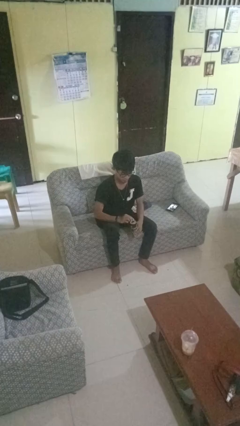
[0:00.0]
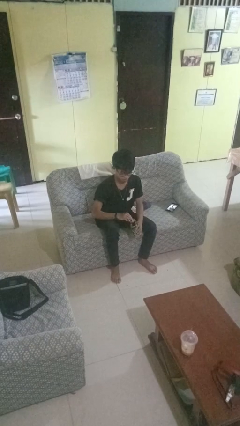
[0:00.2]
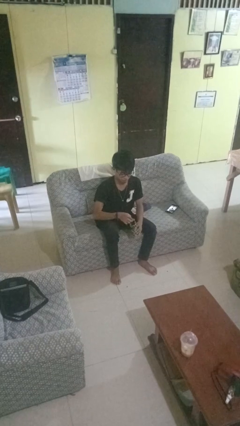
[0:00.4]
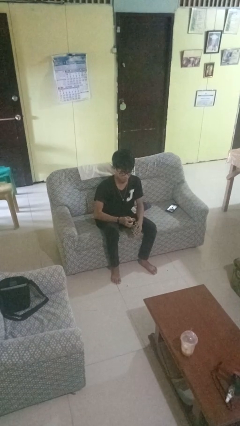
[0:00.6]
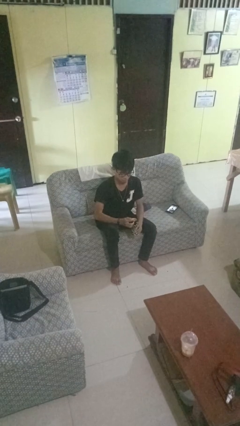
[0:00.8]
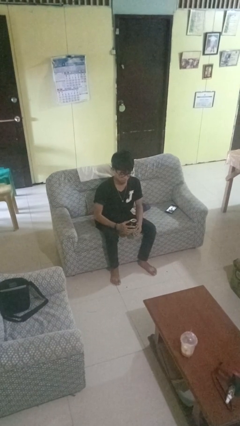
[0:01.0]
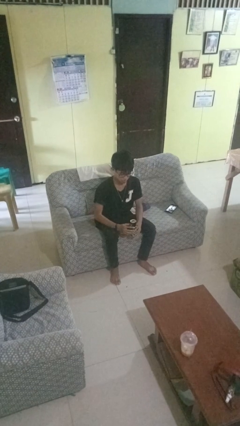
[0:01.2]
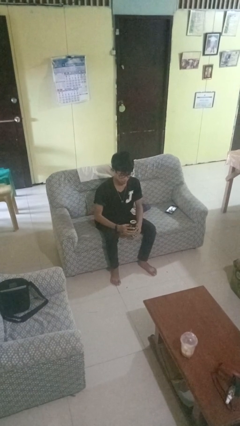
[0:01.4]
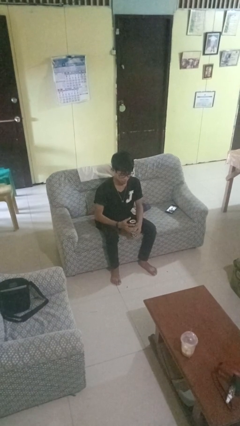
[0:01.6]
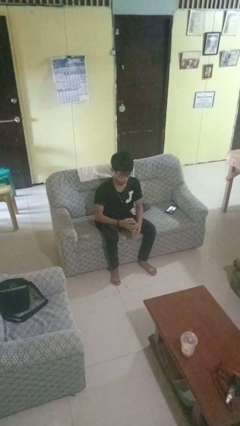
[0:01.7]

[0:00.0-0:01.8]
person opens beverage can

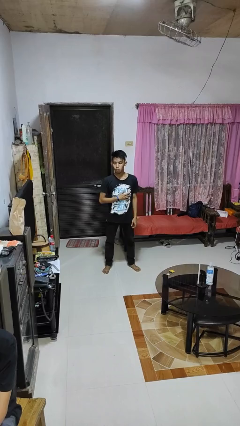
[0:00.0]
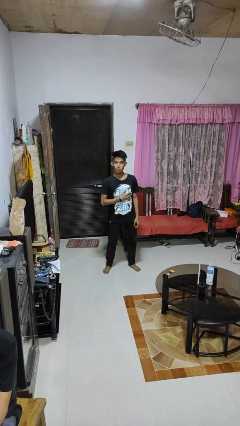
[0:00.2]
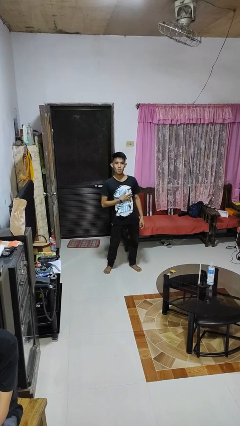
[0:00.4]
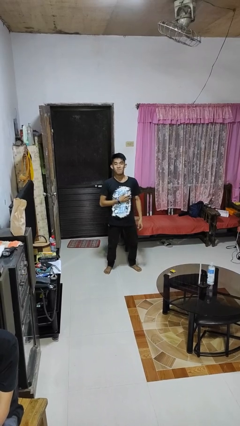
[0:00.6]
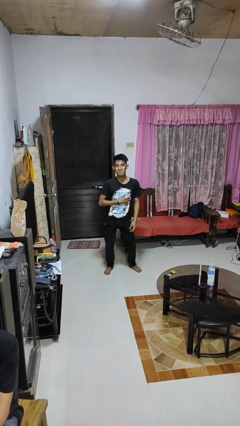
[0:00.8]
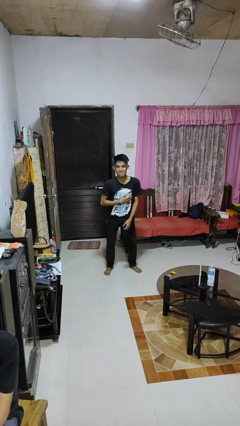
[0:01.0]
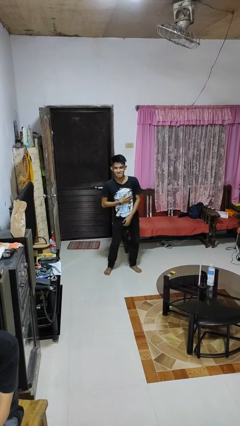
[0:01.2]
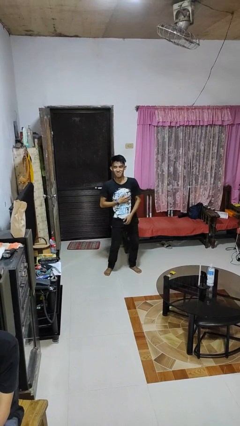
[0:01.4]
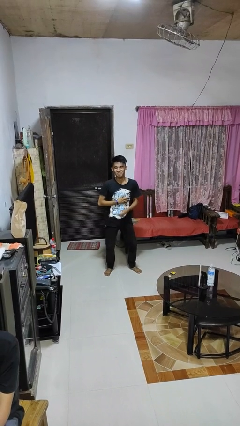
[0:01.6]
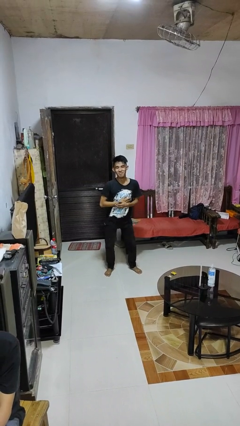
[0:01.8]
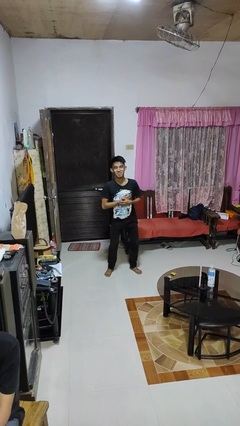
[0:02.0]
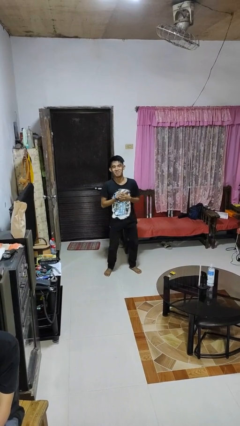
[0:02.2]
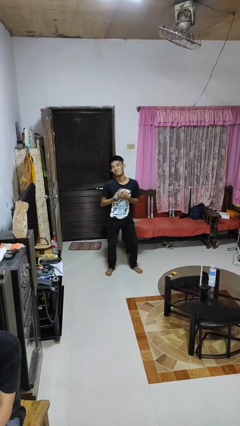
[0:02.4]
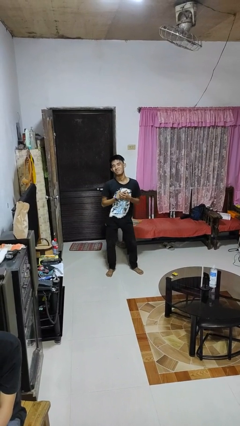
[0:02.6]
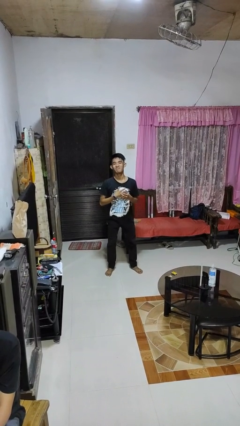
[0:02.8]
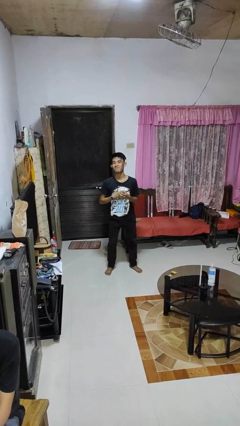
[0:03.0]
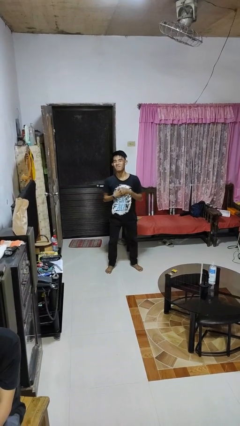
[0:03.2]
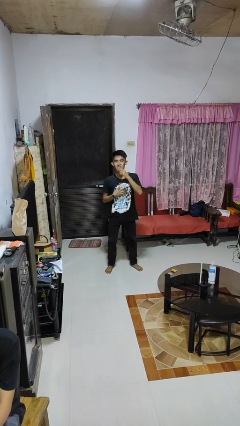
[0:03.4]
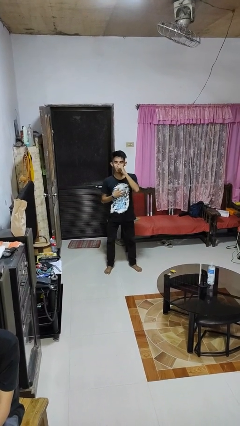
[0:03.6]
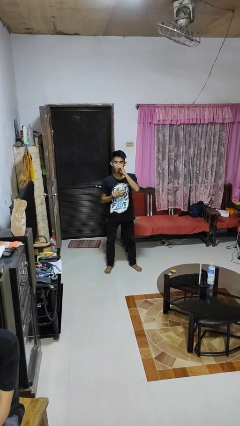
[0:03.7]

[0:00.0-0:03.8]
person wiggles hips

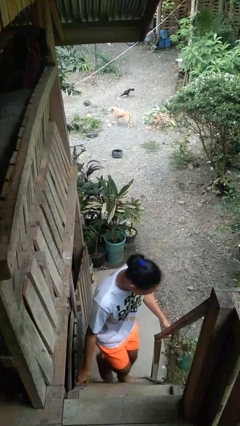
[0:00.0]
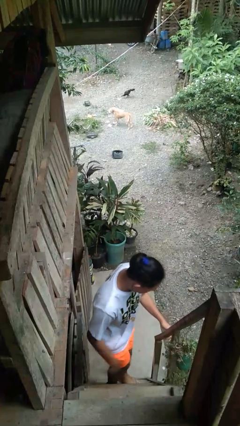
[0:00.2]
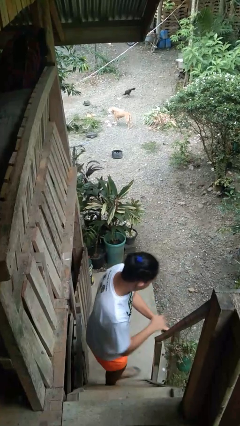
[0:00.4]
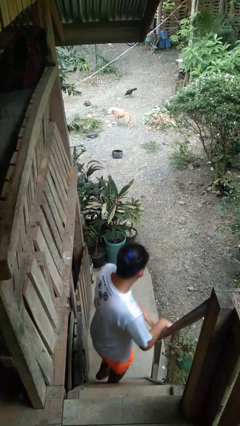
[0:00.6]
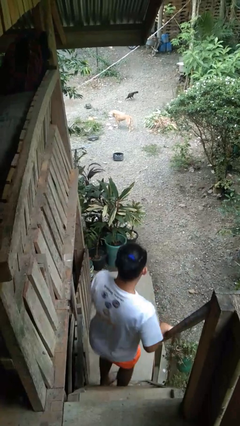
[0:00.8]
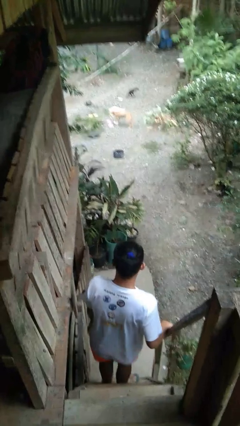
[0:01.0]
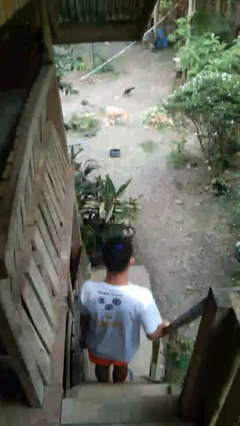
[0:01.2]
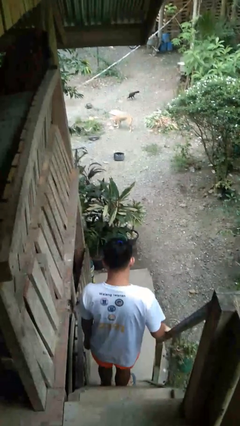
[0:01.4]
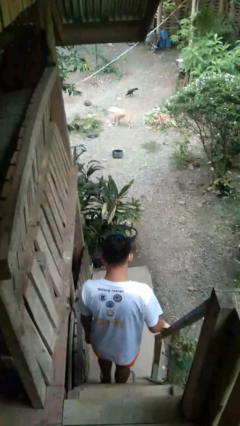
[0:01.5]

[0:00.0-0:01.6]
person climbs down stairs

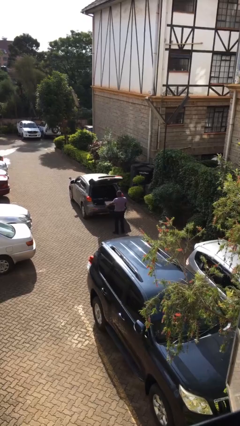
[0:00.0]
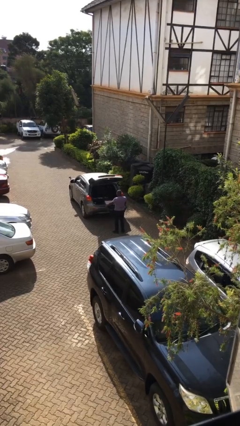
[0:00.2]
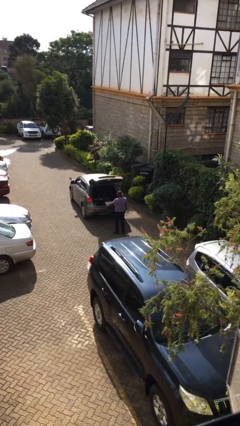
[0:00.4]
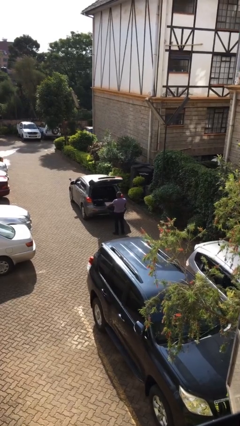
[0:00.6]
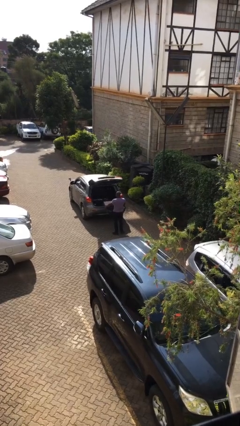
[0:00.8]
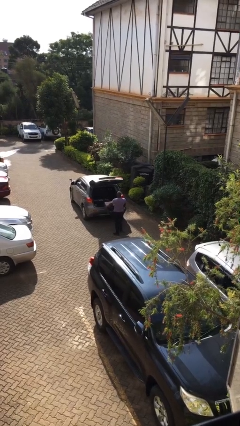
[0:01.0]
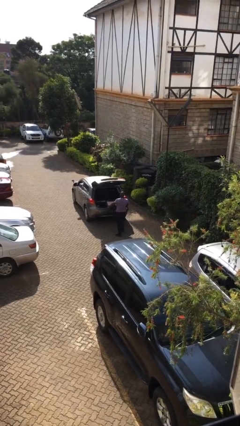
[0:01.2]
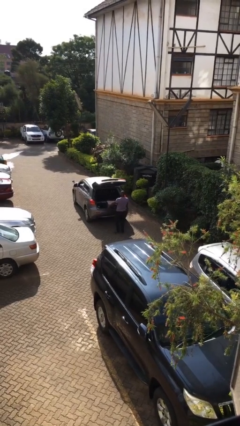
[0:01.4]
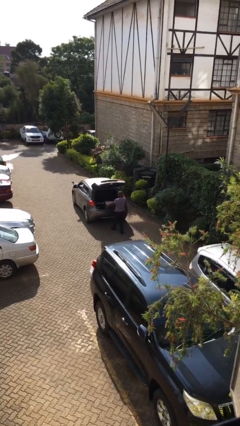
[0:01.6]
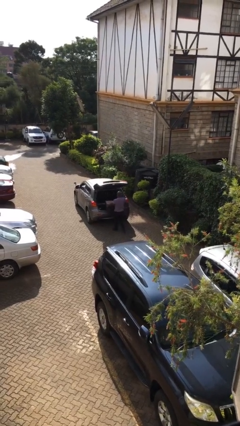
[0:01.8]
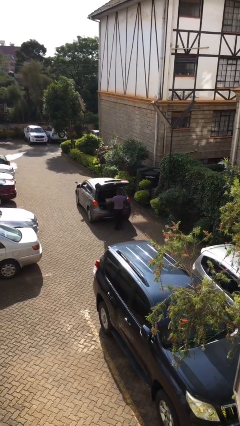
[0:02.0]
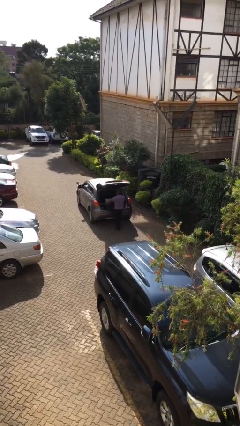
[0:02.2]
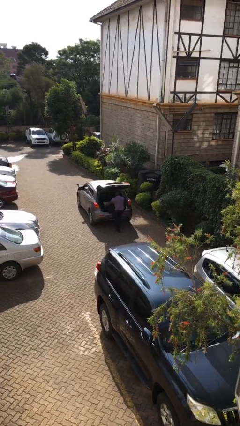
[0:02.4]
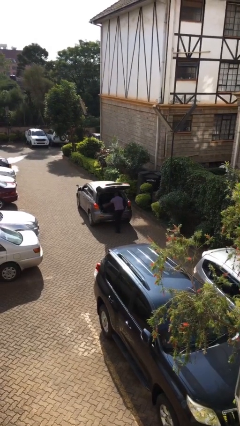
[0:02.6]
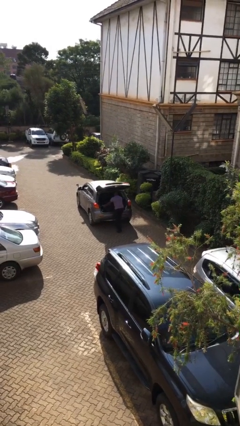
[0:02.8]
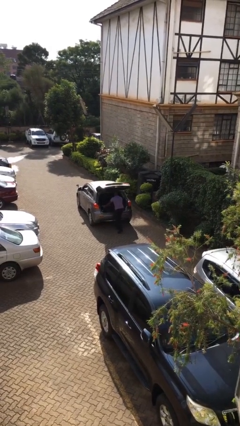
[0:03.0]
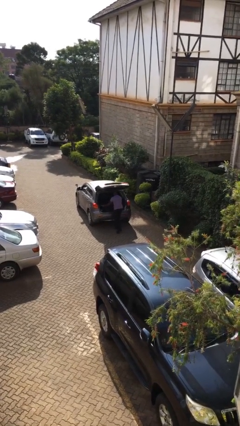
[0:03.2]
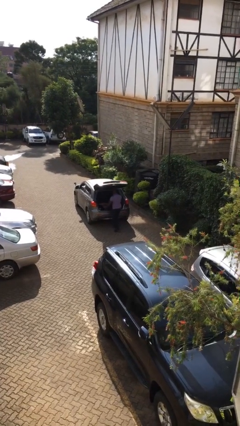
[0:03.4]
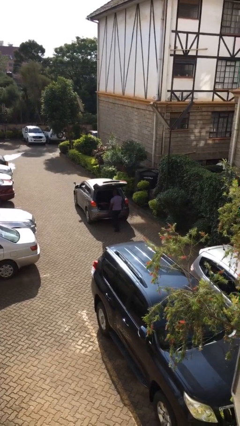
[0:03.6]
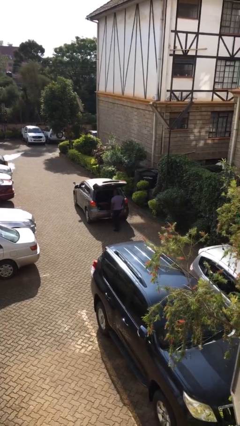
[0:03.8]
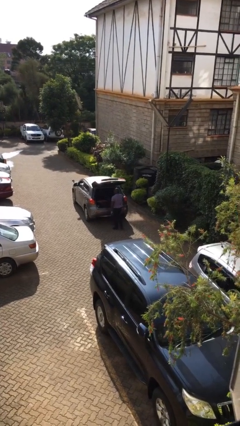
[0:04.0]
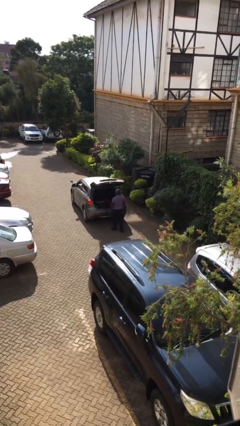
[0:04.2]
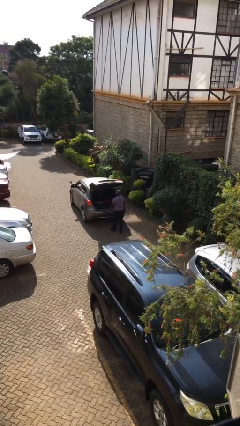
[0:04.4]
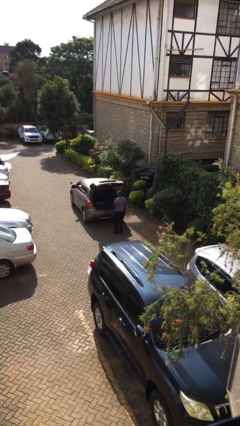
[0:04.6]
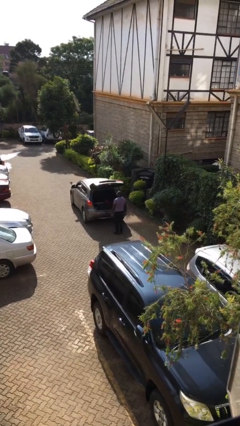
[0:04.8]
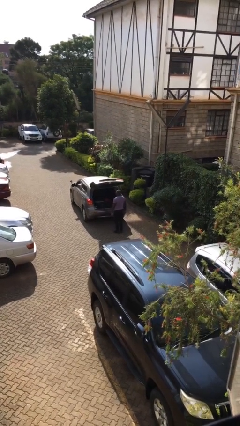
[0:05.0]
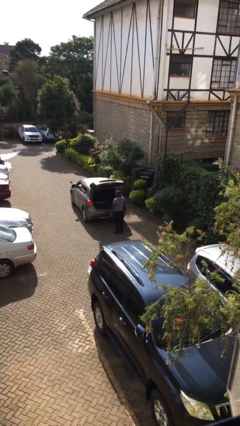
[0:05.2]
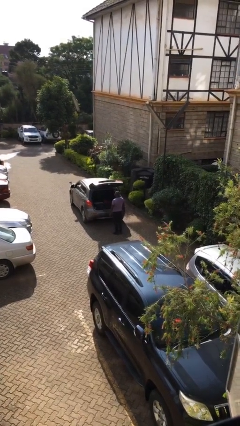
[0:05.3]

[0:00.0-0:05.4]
person loads car

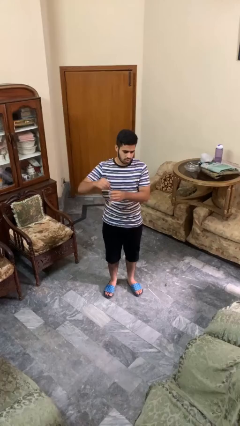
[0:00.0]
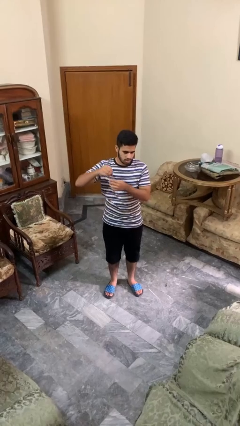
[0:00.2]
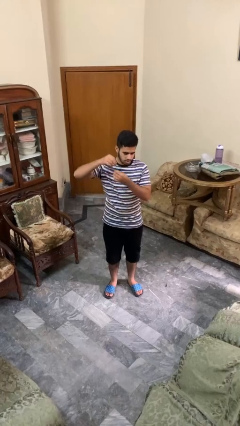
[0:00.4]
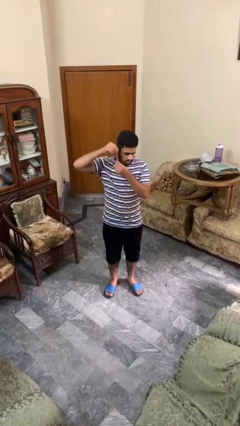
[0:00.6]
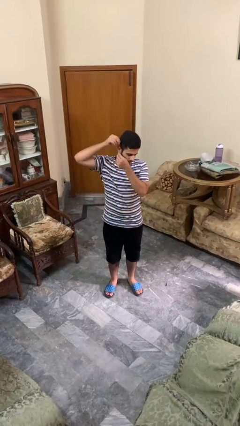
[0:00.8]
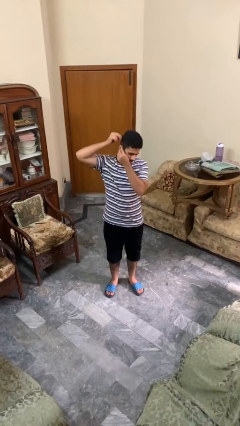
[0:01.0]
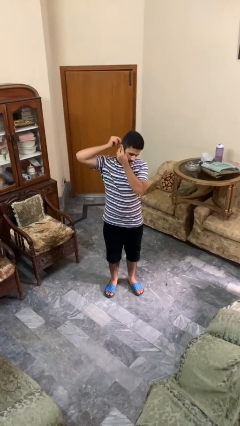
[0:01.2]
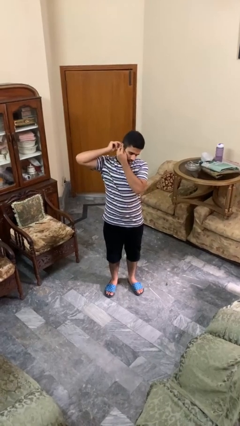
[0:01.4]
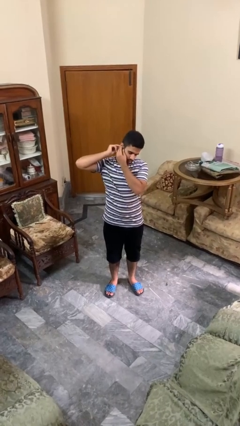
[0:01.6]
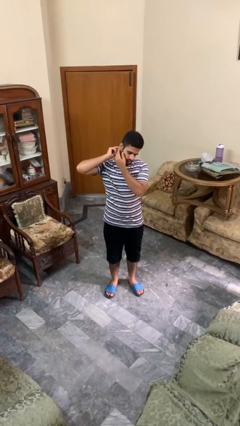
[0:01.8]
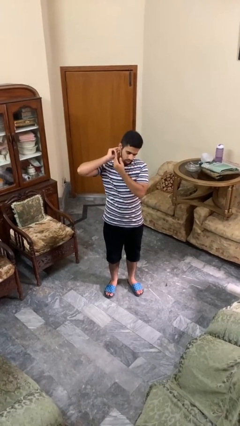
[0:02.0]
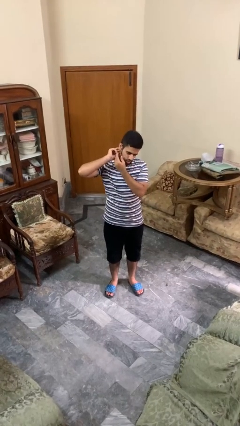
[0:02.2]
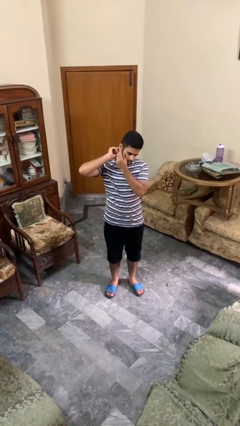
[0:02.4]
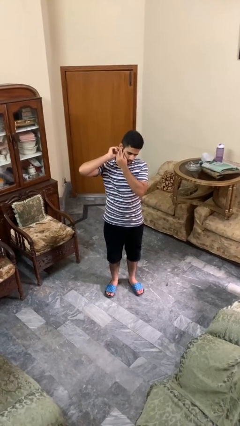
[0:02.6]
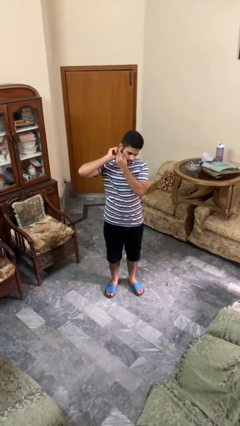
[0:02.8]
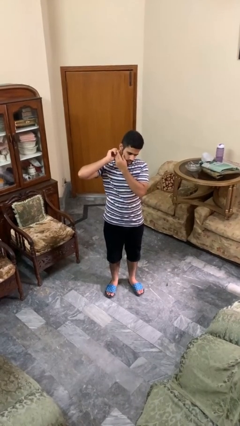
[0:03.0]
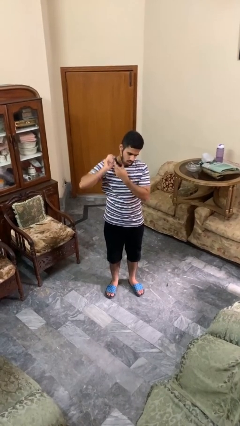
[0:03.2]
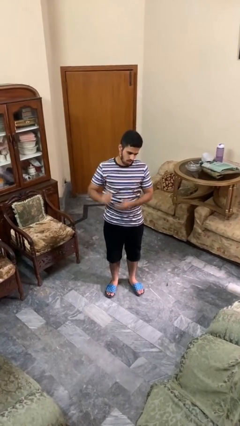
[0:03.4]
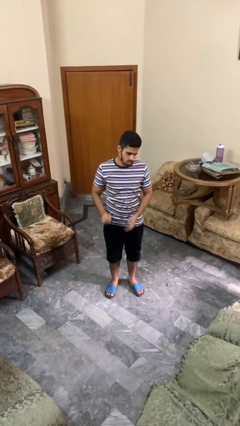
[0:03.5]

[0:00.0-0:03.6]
person puts on earrings

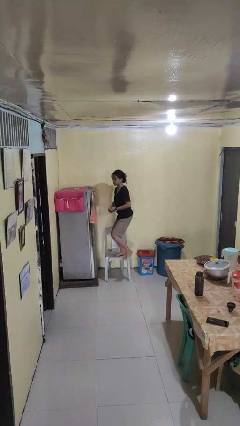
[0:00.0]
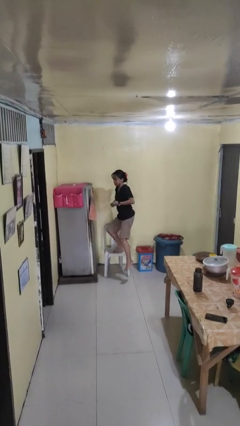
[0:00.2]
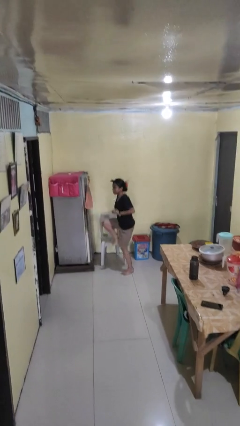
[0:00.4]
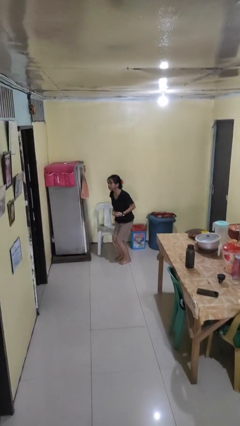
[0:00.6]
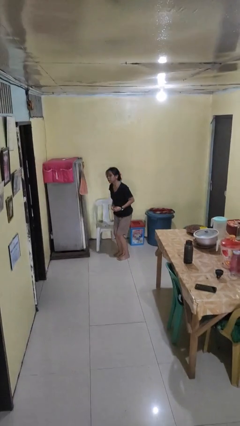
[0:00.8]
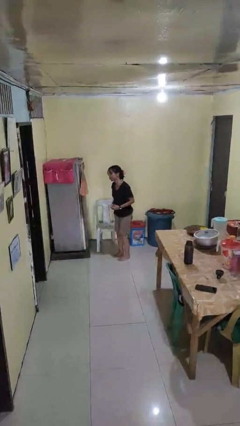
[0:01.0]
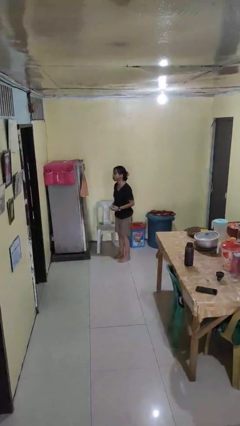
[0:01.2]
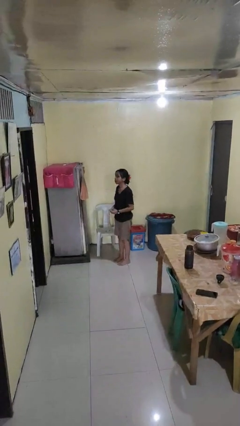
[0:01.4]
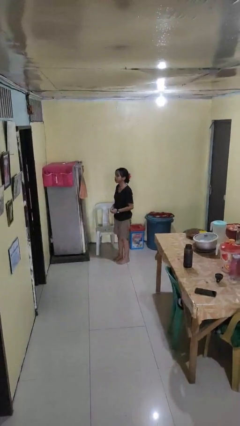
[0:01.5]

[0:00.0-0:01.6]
person climbs off chair
